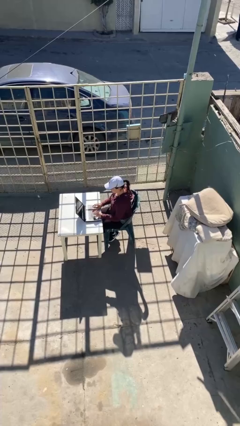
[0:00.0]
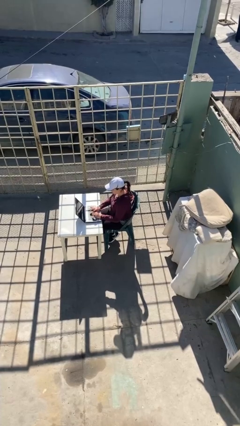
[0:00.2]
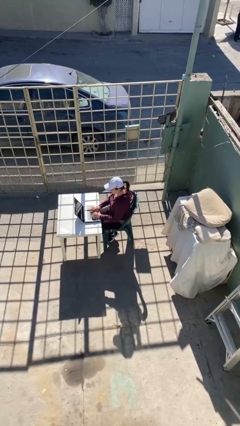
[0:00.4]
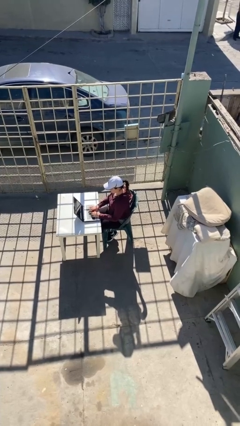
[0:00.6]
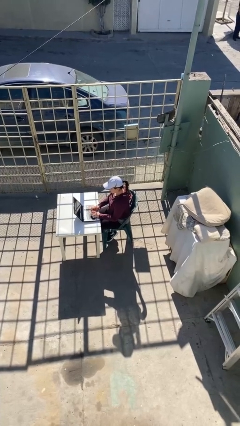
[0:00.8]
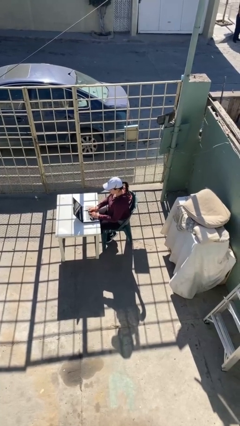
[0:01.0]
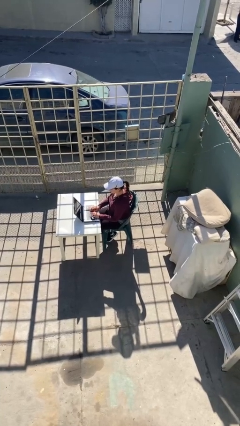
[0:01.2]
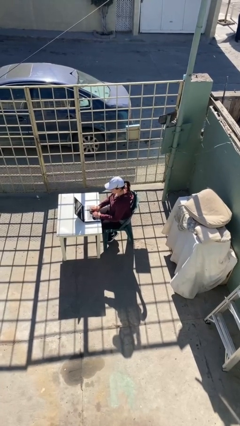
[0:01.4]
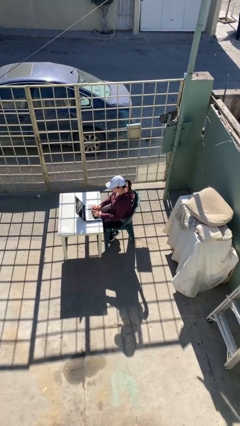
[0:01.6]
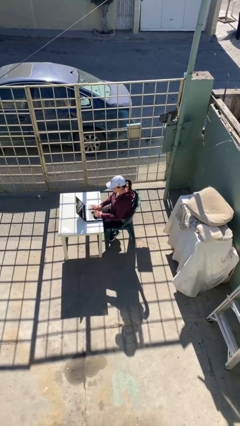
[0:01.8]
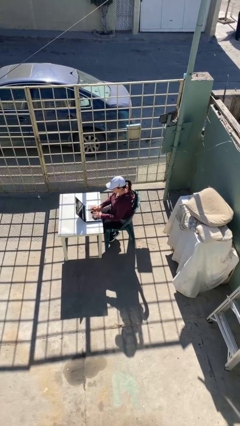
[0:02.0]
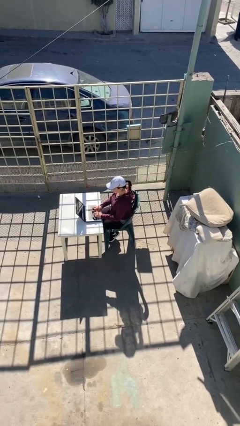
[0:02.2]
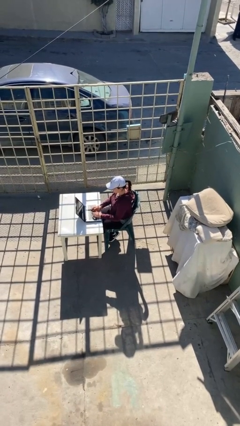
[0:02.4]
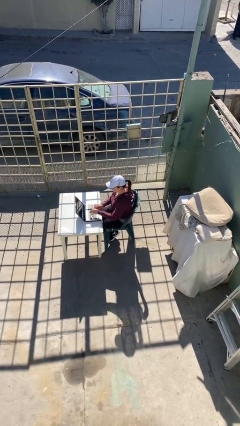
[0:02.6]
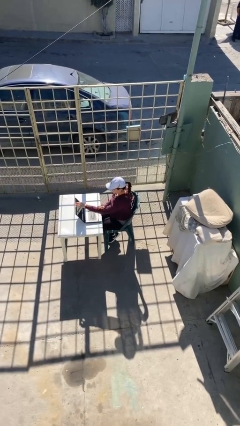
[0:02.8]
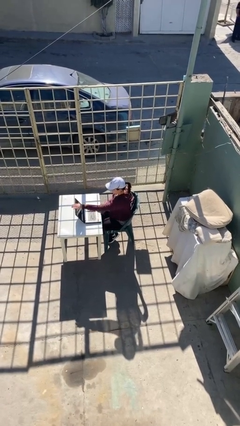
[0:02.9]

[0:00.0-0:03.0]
person interacts with laptop

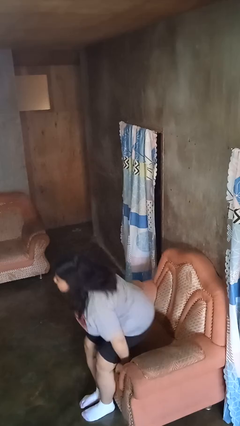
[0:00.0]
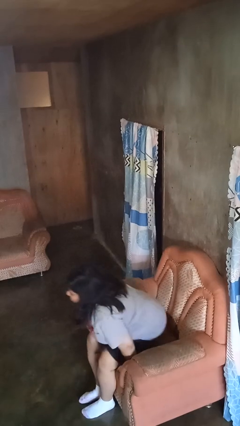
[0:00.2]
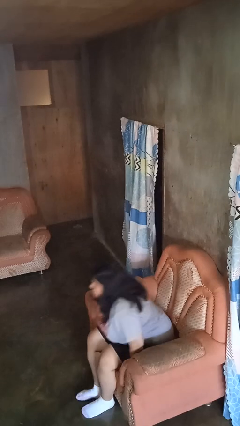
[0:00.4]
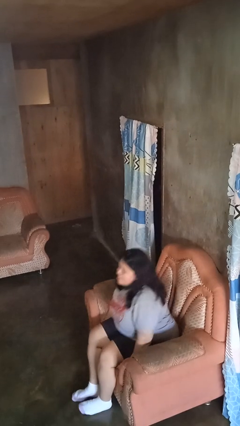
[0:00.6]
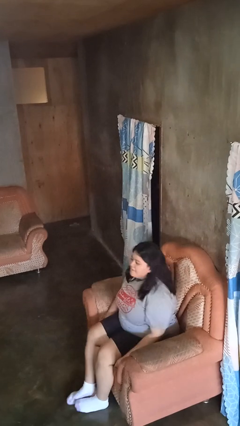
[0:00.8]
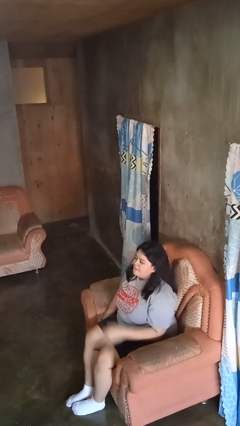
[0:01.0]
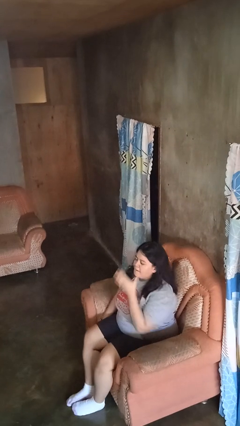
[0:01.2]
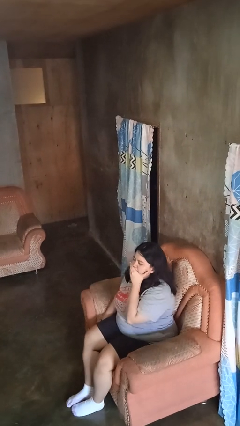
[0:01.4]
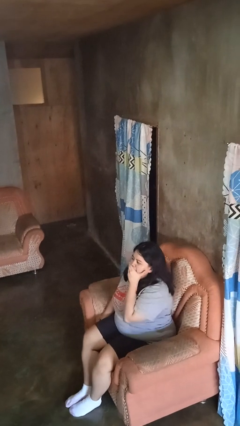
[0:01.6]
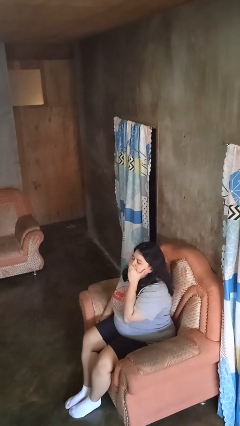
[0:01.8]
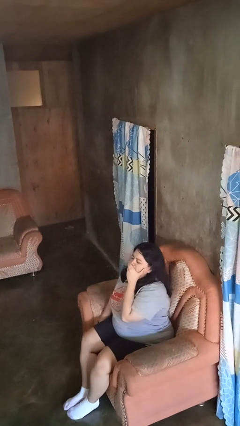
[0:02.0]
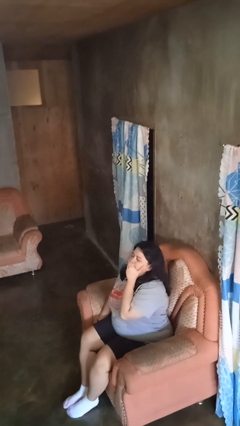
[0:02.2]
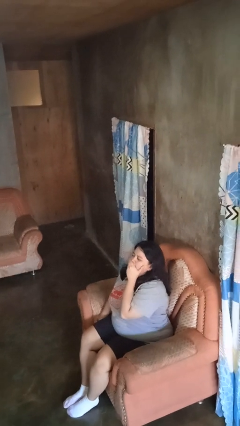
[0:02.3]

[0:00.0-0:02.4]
person yawns

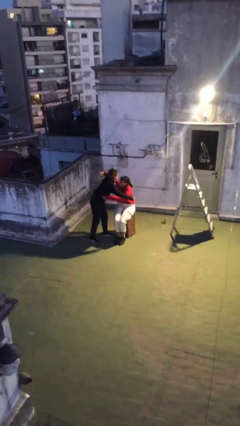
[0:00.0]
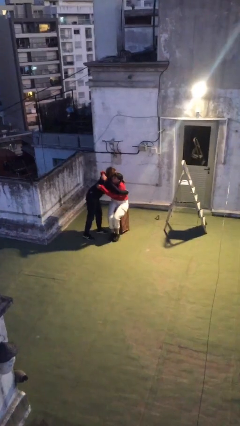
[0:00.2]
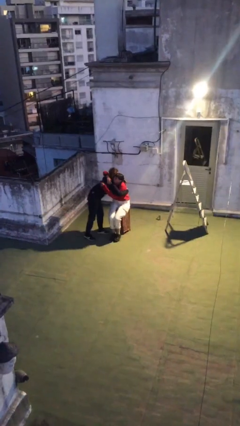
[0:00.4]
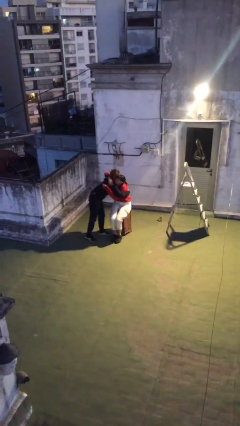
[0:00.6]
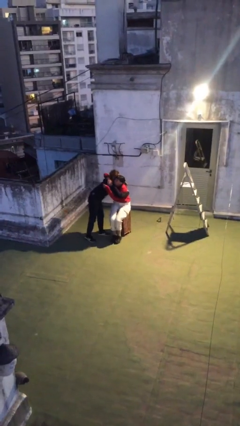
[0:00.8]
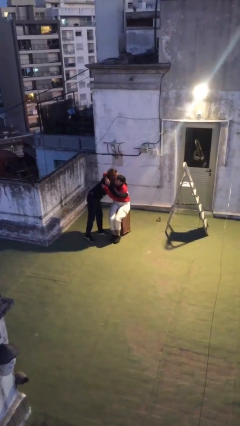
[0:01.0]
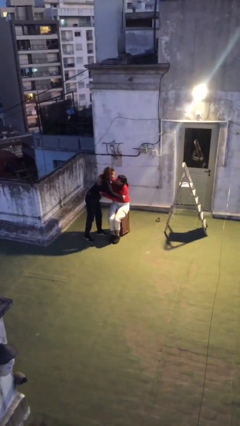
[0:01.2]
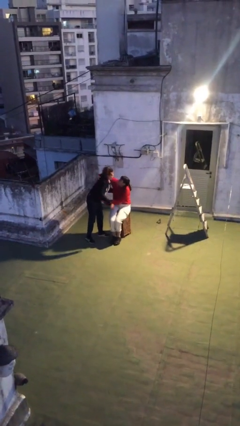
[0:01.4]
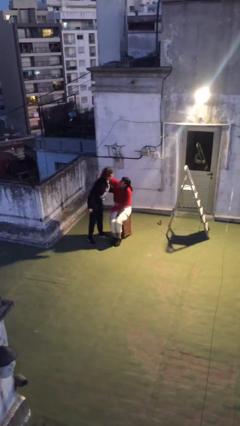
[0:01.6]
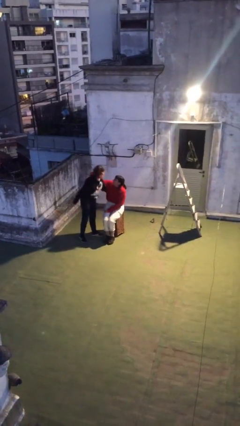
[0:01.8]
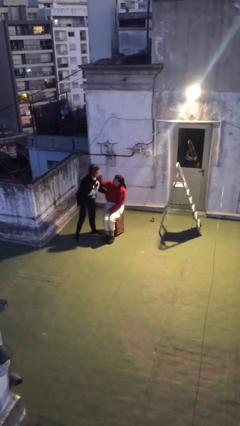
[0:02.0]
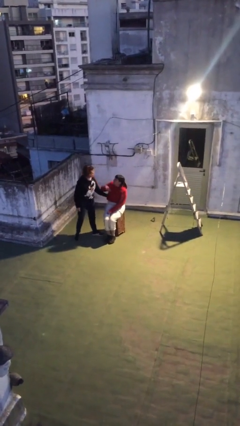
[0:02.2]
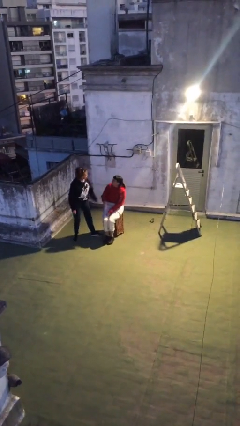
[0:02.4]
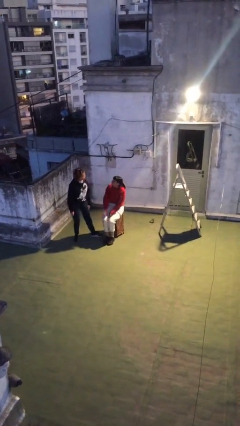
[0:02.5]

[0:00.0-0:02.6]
person embraces person

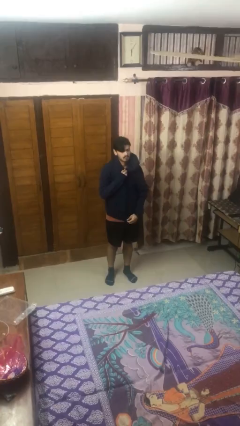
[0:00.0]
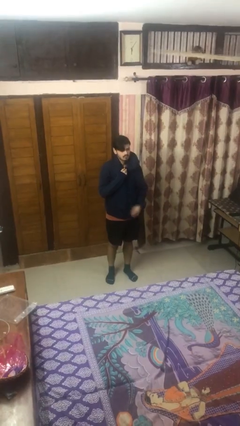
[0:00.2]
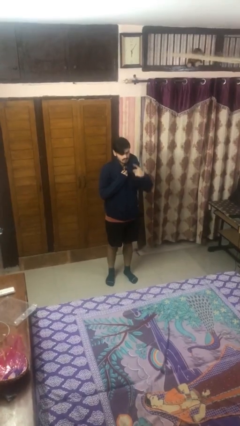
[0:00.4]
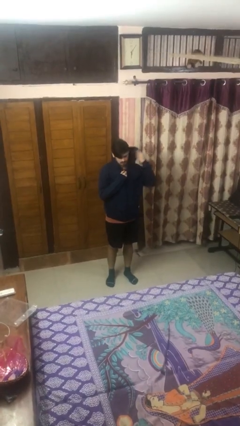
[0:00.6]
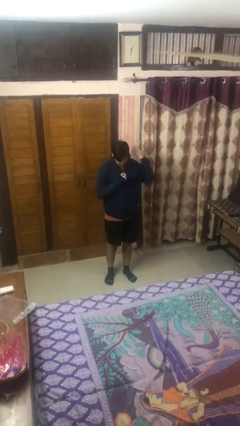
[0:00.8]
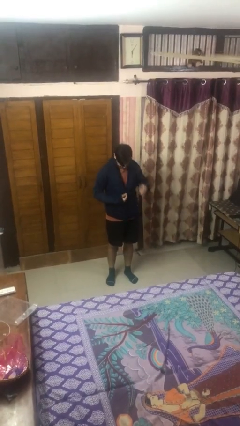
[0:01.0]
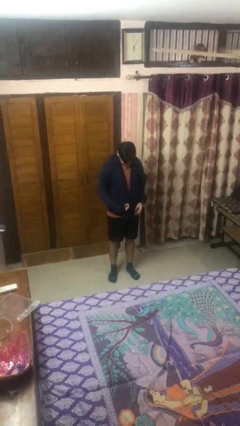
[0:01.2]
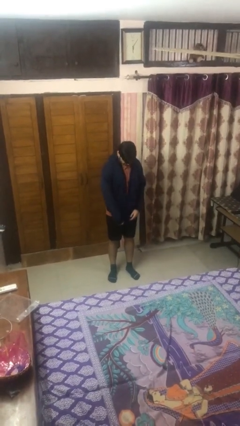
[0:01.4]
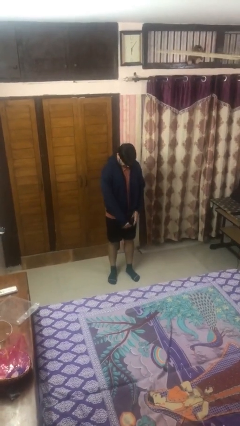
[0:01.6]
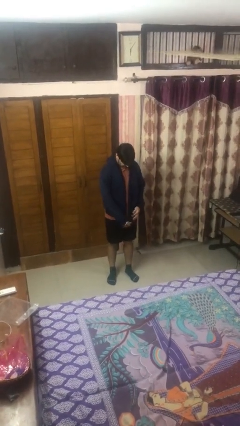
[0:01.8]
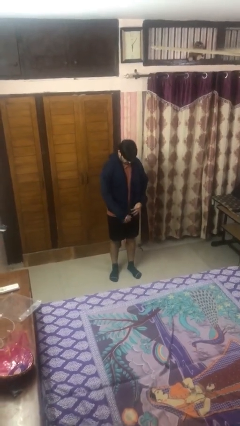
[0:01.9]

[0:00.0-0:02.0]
person unzips jacket

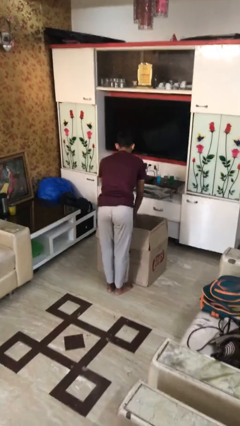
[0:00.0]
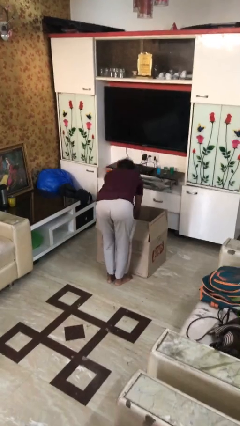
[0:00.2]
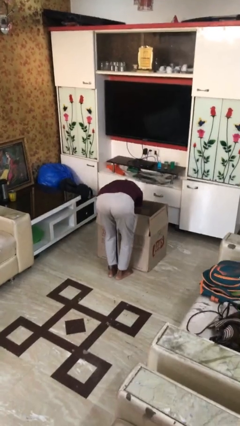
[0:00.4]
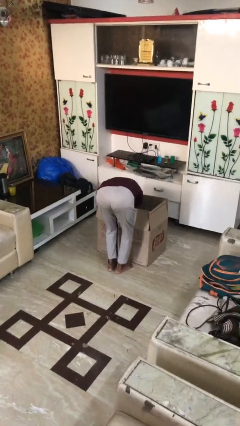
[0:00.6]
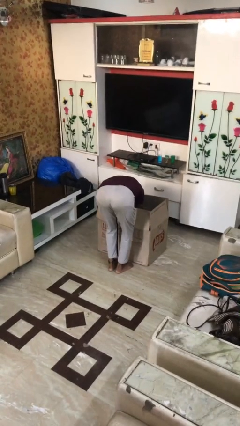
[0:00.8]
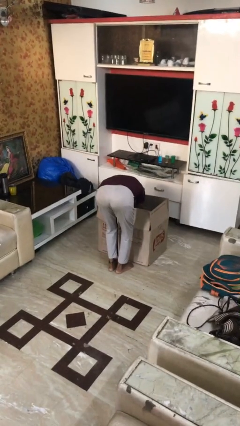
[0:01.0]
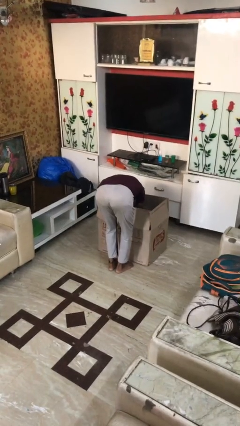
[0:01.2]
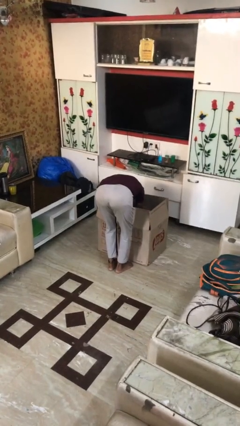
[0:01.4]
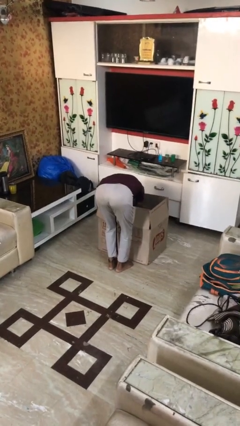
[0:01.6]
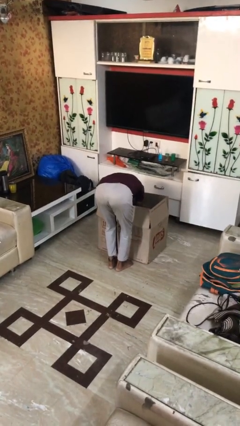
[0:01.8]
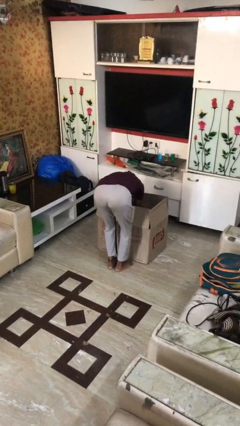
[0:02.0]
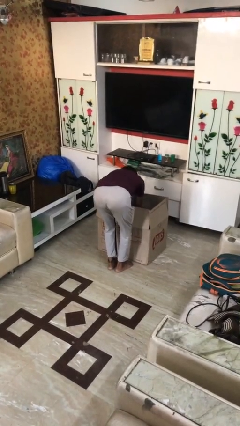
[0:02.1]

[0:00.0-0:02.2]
person searches in box

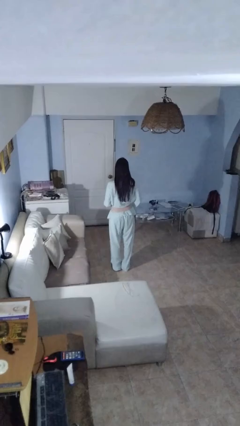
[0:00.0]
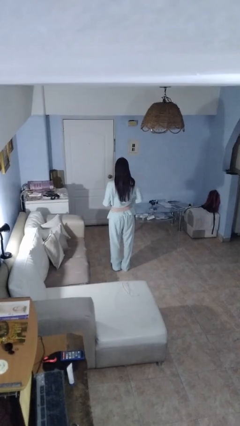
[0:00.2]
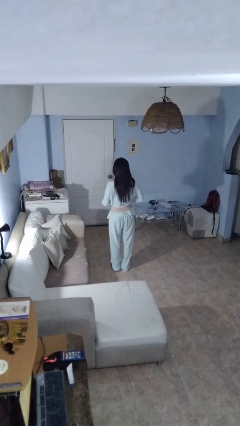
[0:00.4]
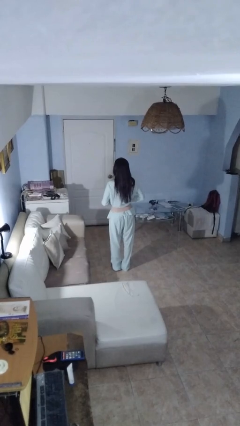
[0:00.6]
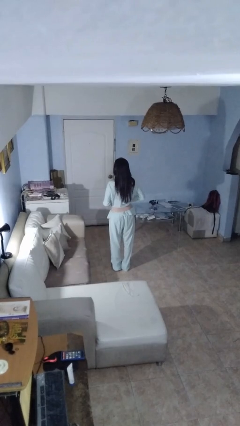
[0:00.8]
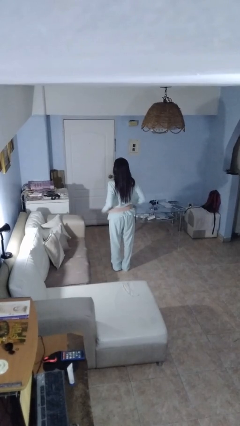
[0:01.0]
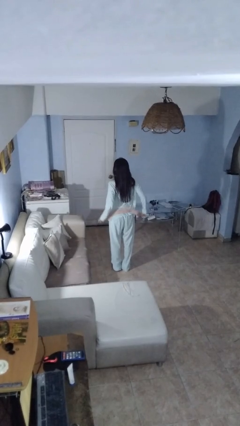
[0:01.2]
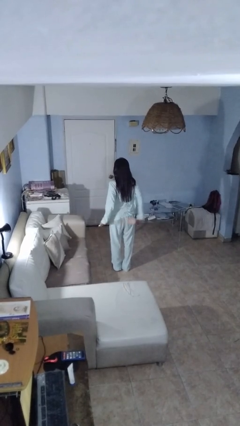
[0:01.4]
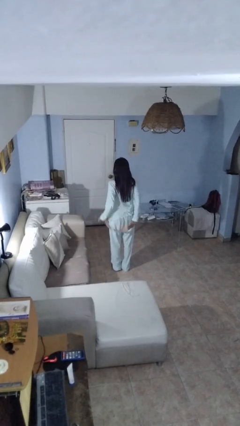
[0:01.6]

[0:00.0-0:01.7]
person takes off belt

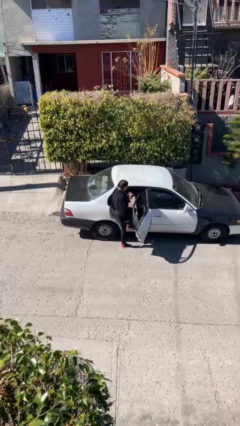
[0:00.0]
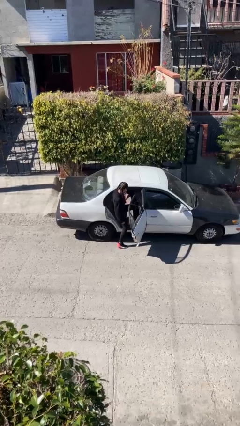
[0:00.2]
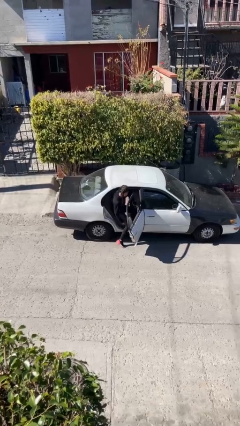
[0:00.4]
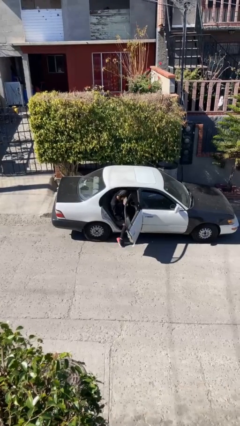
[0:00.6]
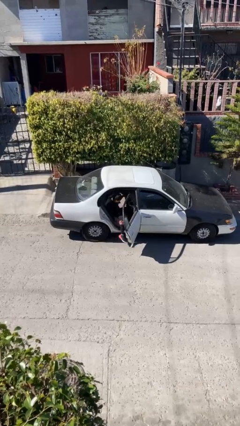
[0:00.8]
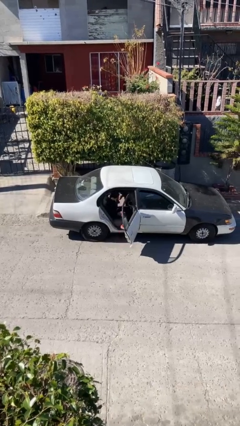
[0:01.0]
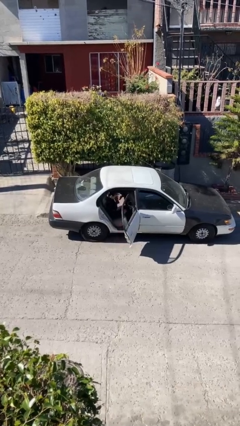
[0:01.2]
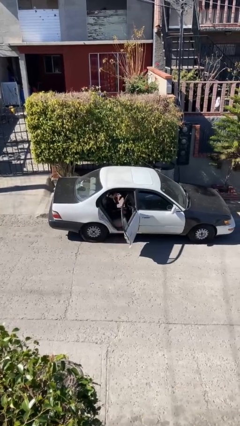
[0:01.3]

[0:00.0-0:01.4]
person enters car

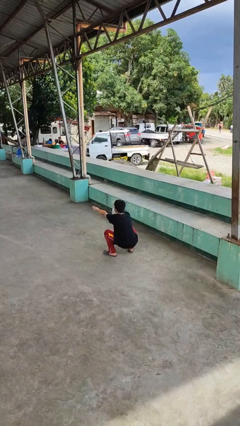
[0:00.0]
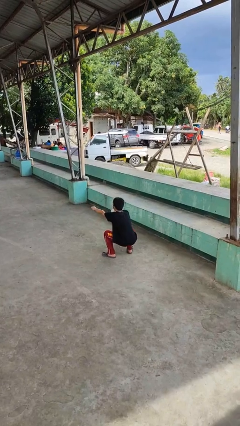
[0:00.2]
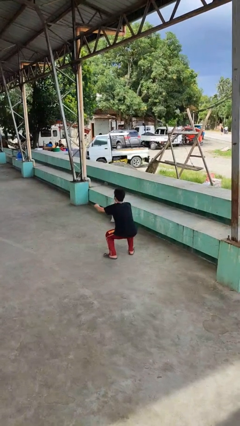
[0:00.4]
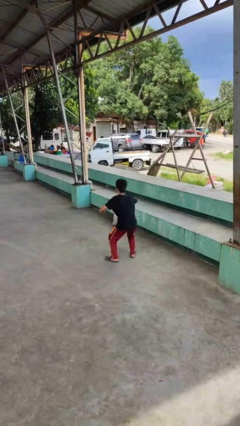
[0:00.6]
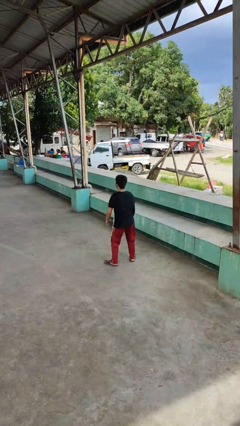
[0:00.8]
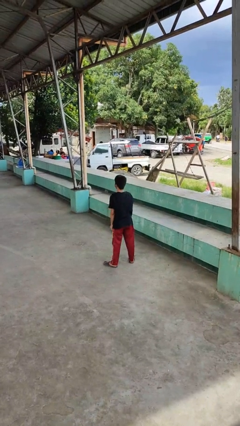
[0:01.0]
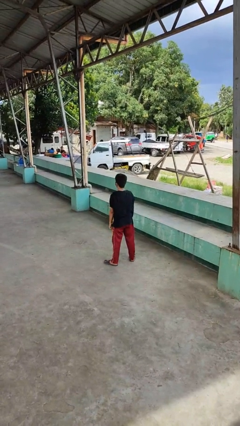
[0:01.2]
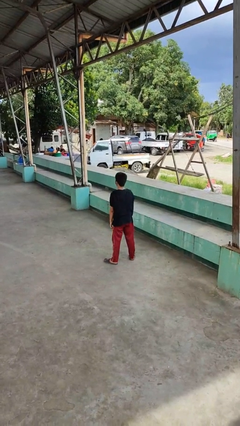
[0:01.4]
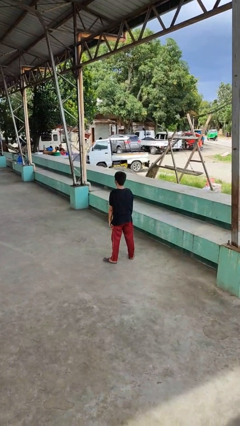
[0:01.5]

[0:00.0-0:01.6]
person stands up
